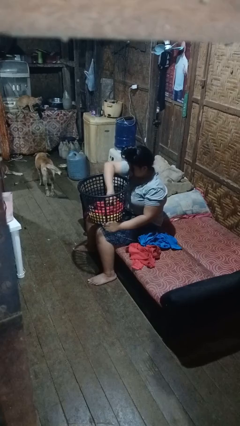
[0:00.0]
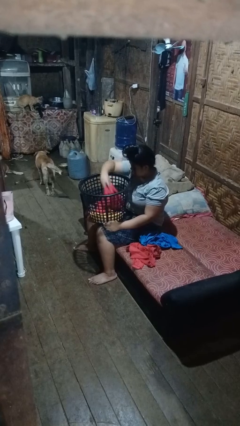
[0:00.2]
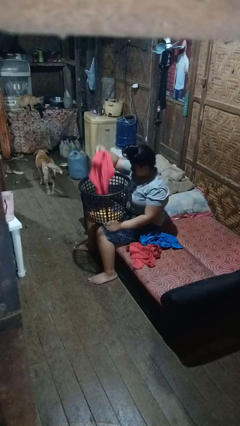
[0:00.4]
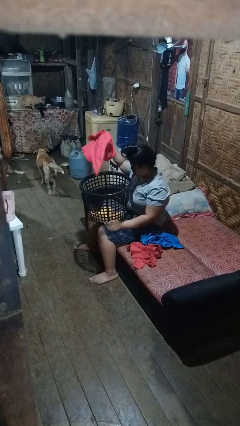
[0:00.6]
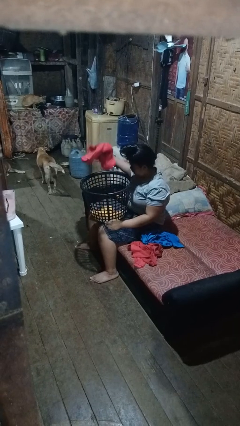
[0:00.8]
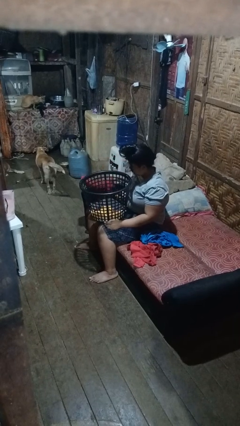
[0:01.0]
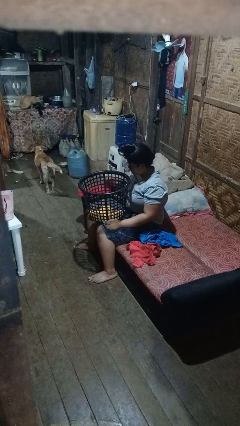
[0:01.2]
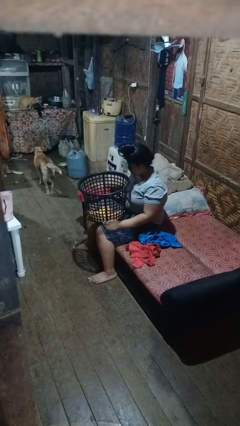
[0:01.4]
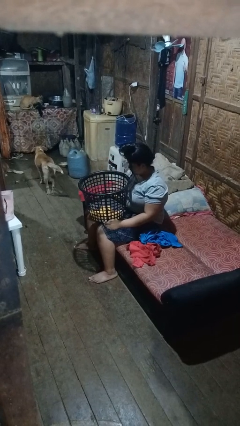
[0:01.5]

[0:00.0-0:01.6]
person takes object from basket

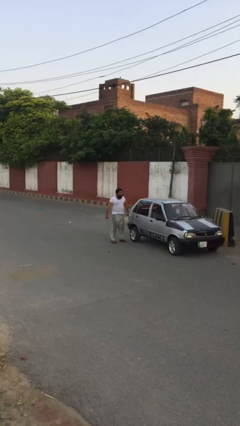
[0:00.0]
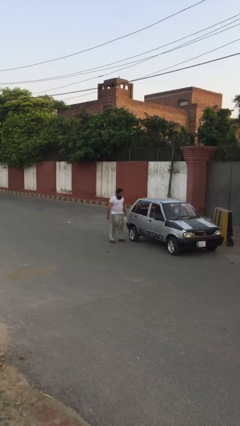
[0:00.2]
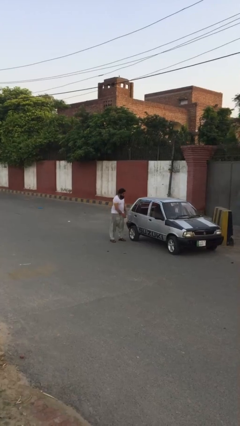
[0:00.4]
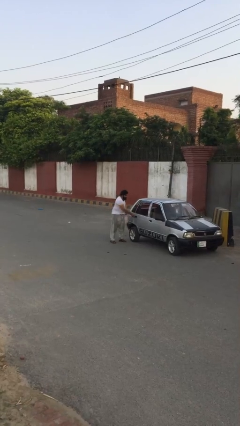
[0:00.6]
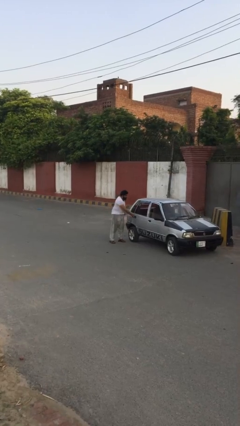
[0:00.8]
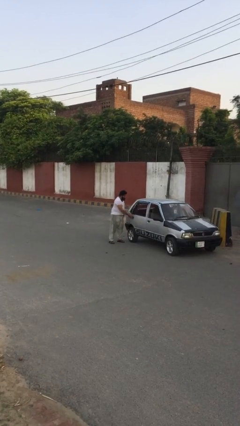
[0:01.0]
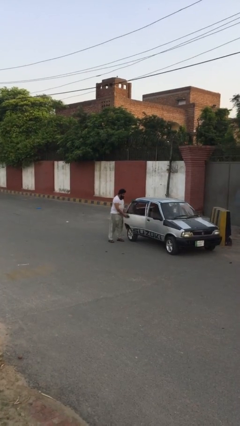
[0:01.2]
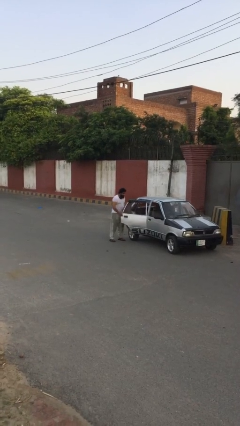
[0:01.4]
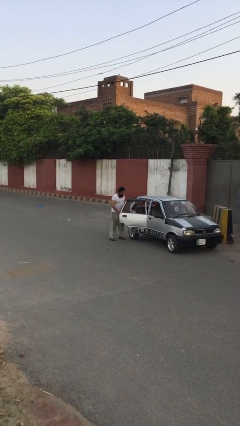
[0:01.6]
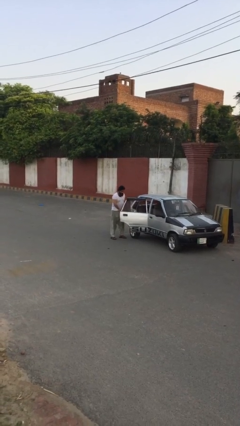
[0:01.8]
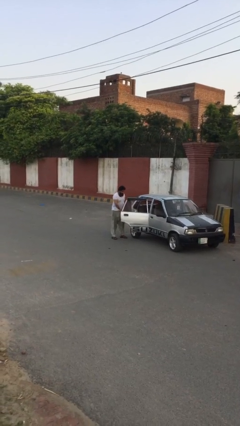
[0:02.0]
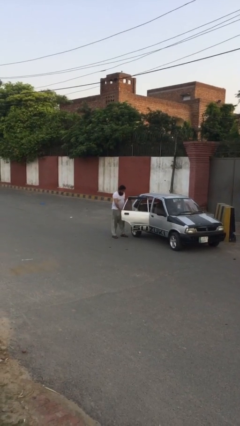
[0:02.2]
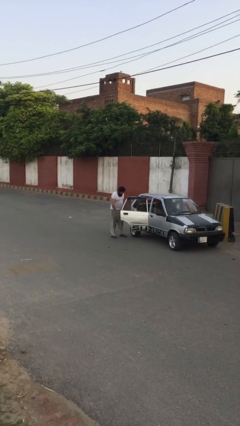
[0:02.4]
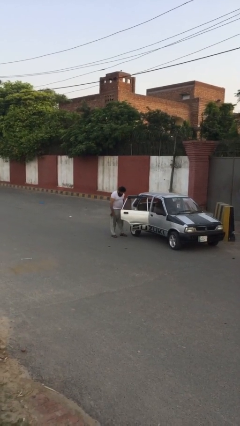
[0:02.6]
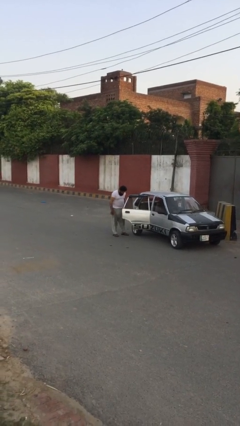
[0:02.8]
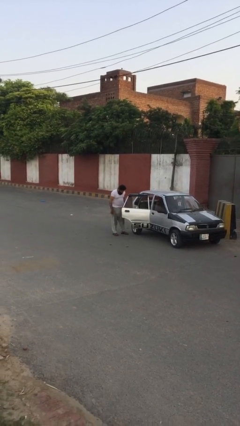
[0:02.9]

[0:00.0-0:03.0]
person opens car door

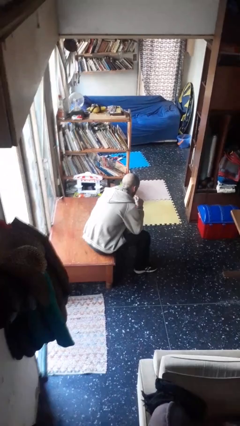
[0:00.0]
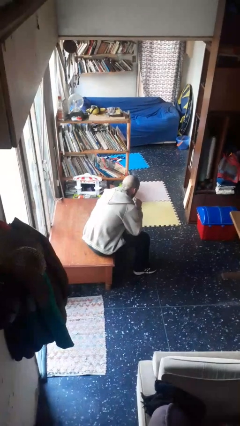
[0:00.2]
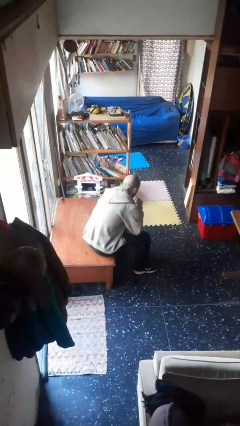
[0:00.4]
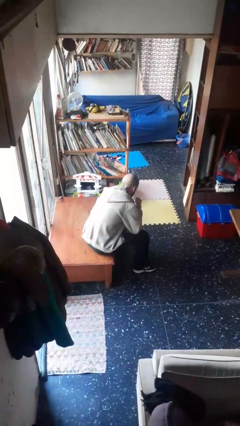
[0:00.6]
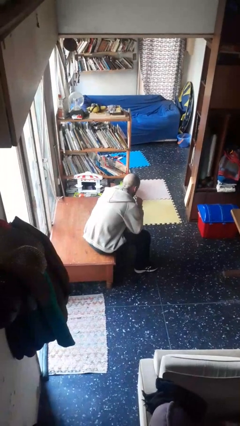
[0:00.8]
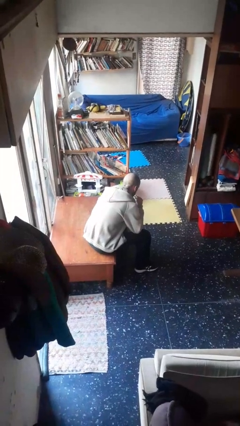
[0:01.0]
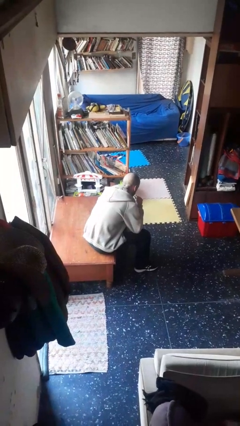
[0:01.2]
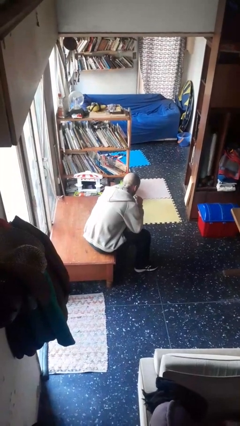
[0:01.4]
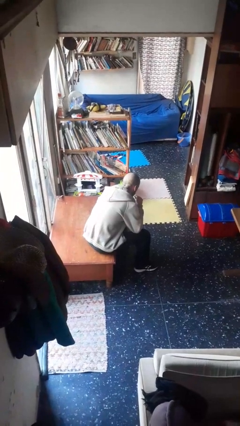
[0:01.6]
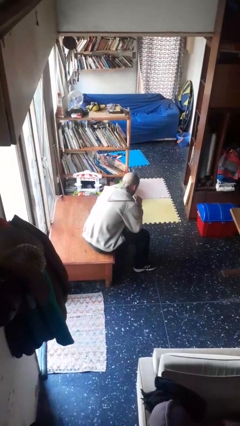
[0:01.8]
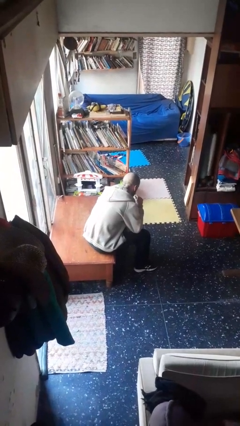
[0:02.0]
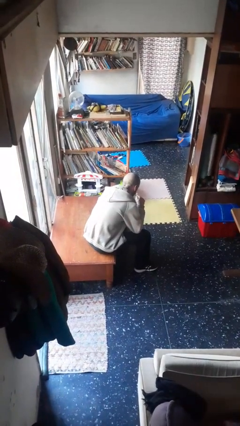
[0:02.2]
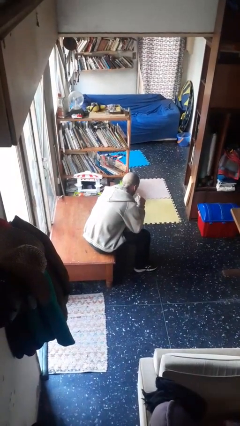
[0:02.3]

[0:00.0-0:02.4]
person drinks from straw

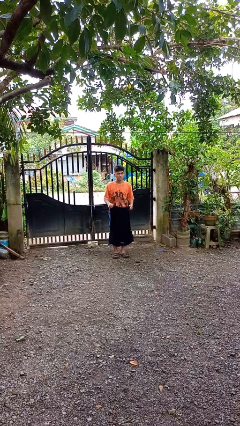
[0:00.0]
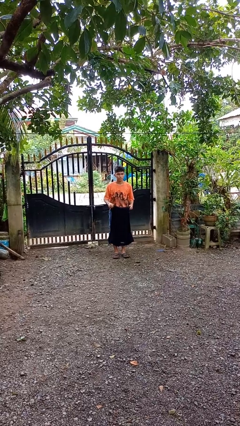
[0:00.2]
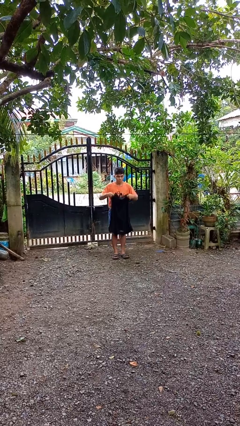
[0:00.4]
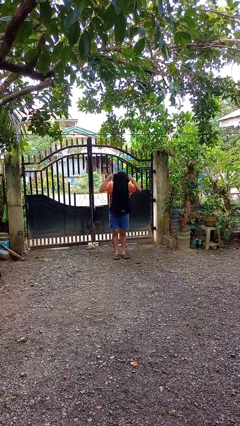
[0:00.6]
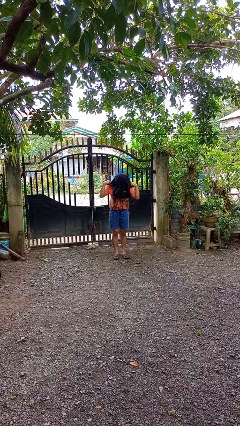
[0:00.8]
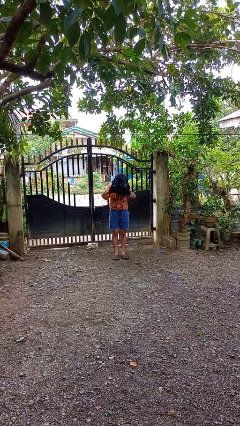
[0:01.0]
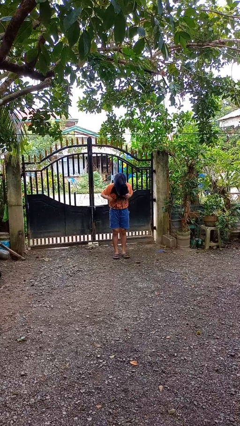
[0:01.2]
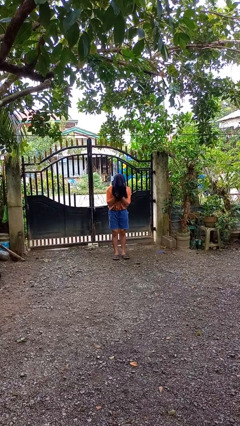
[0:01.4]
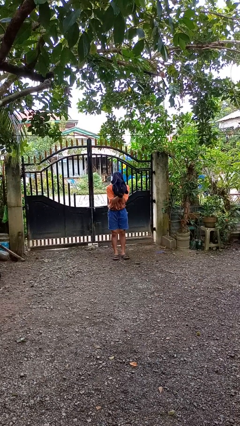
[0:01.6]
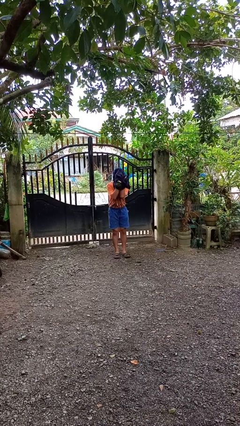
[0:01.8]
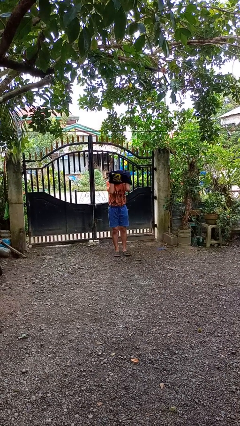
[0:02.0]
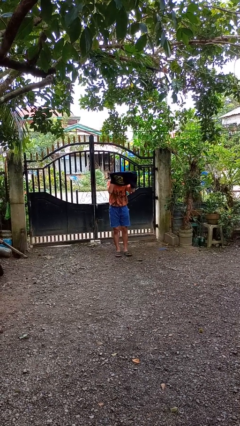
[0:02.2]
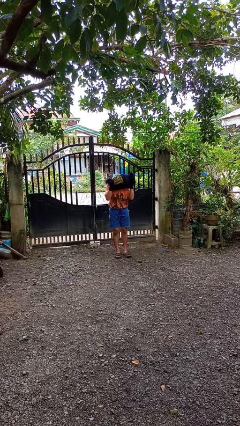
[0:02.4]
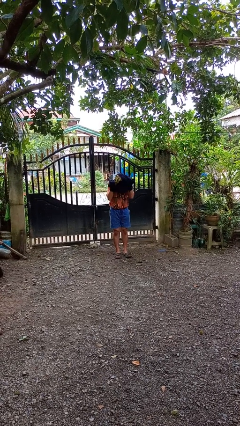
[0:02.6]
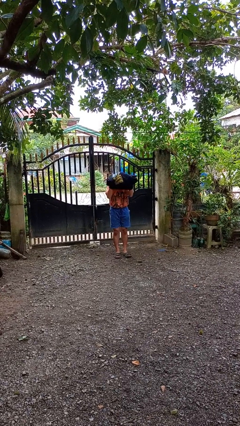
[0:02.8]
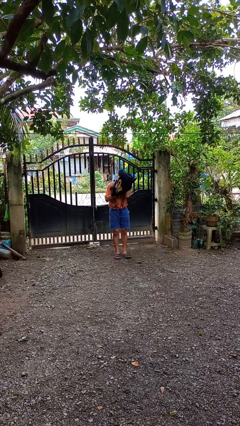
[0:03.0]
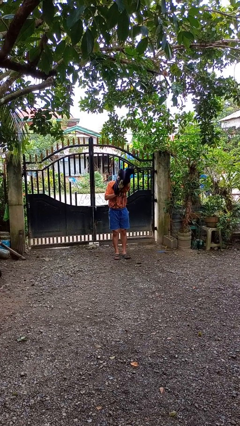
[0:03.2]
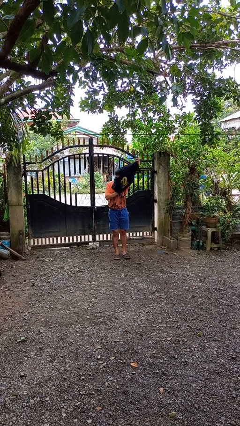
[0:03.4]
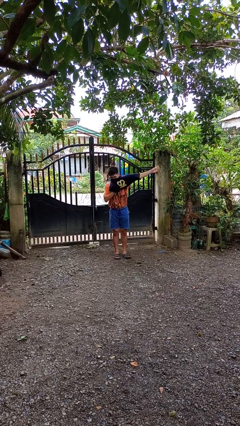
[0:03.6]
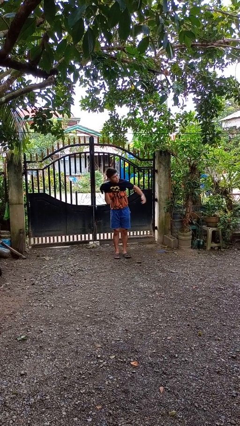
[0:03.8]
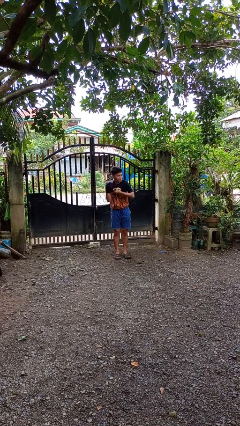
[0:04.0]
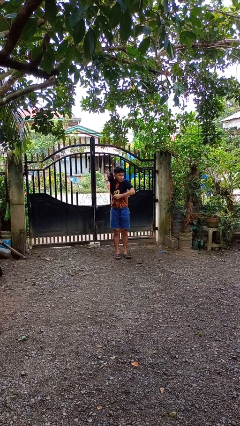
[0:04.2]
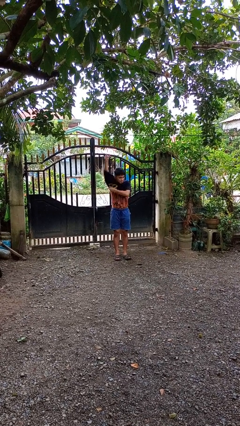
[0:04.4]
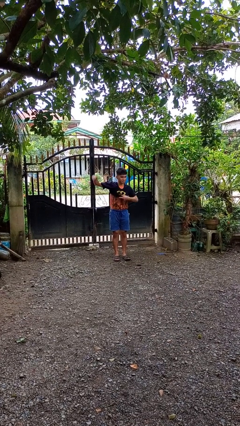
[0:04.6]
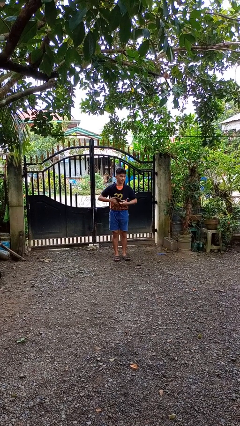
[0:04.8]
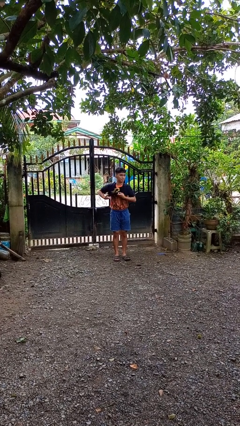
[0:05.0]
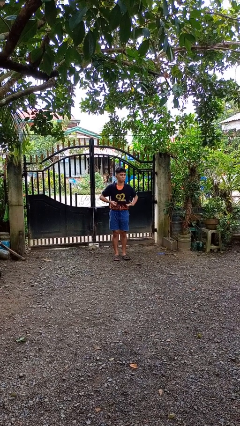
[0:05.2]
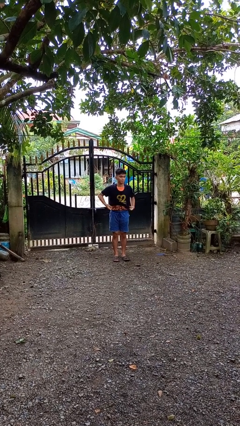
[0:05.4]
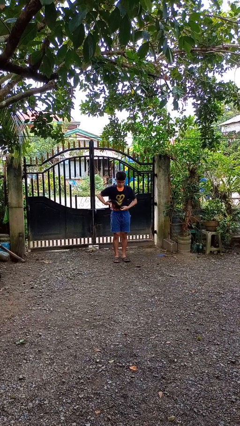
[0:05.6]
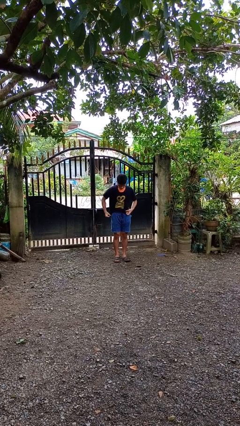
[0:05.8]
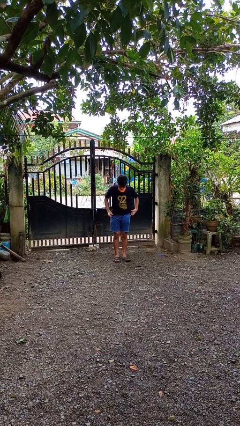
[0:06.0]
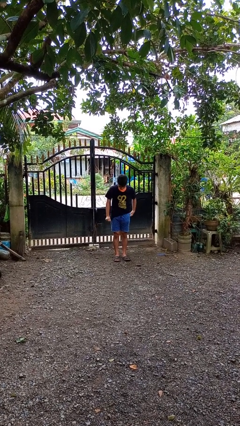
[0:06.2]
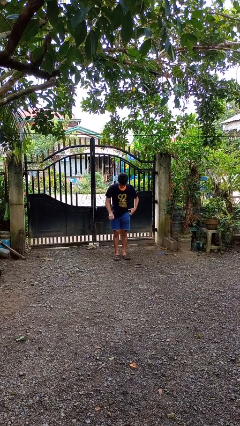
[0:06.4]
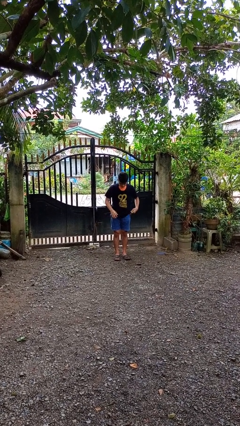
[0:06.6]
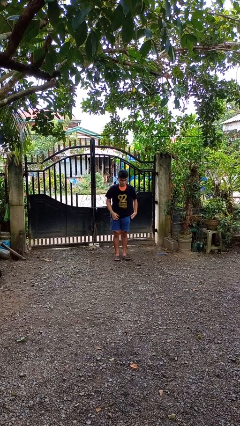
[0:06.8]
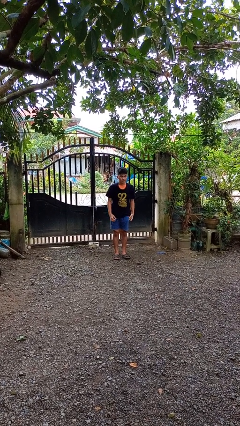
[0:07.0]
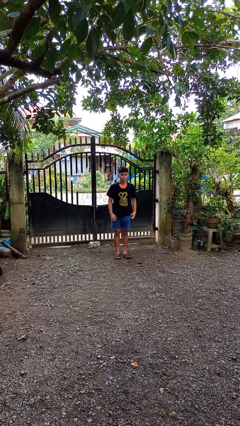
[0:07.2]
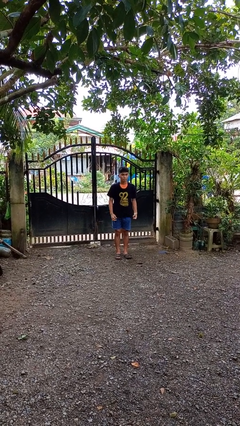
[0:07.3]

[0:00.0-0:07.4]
person puts on shirt

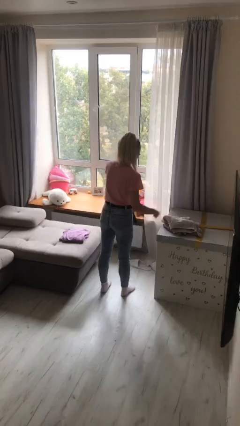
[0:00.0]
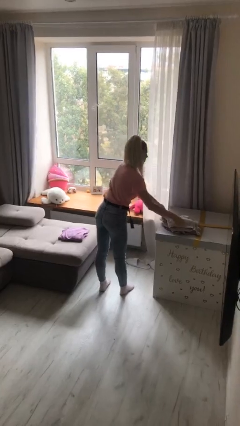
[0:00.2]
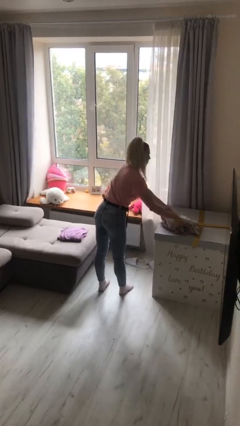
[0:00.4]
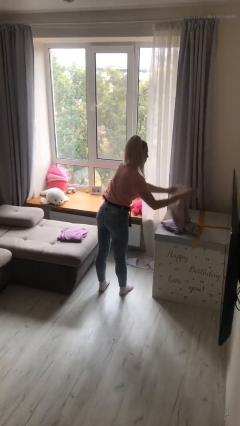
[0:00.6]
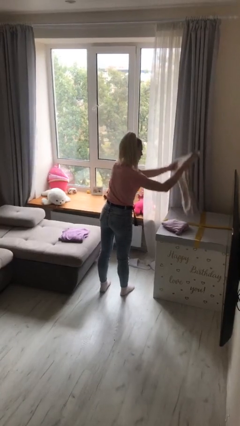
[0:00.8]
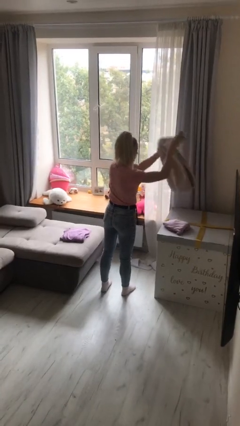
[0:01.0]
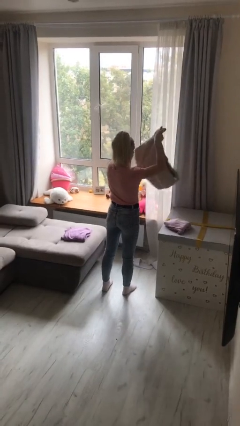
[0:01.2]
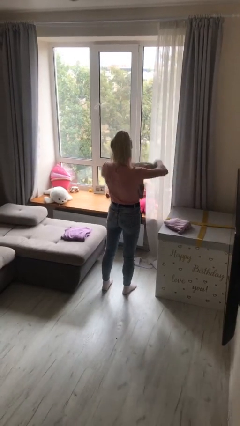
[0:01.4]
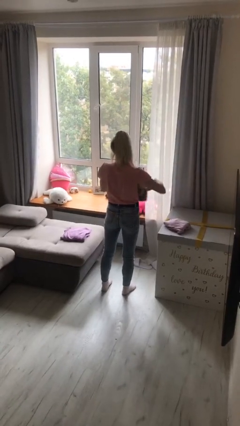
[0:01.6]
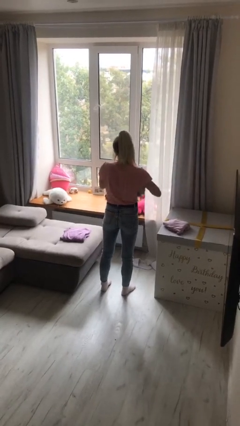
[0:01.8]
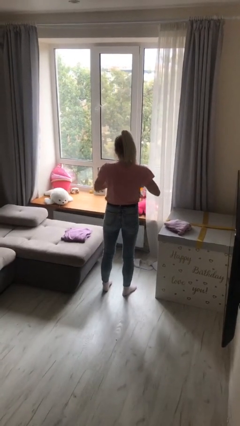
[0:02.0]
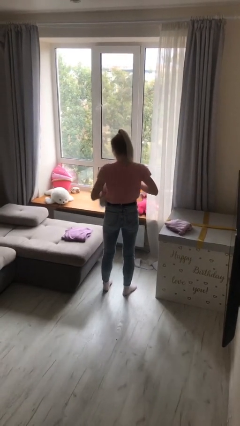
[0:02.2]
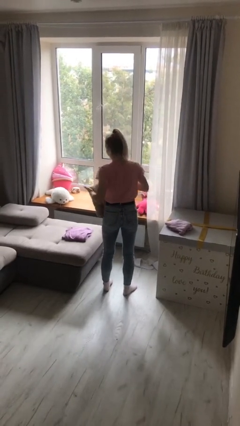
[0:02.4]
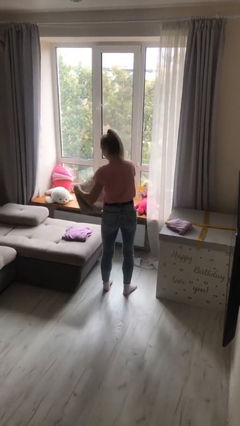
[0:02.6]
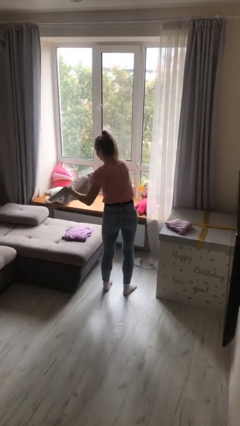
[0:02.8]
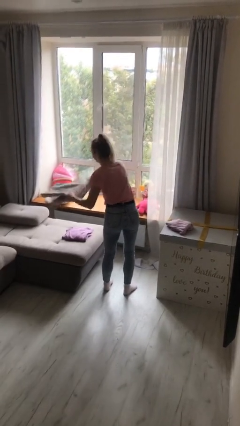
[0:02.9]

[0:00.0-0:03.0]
person folds towel
